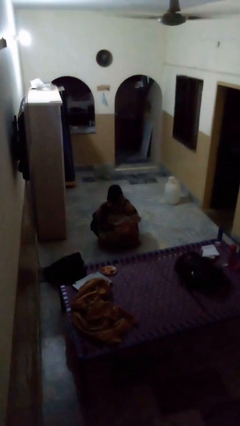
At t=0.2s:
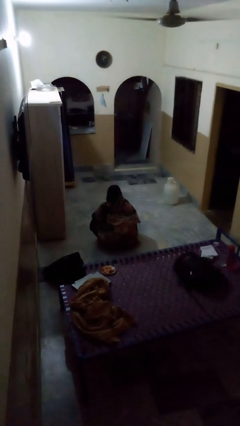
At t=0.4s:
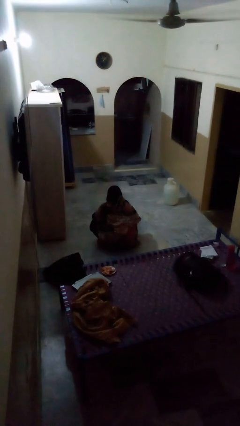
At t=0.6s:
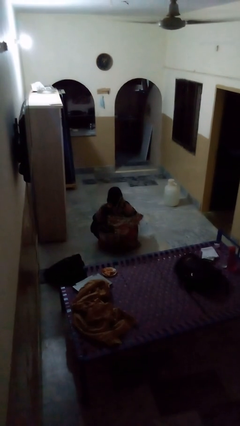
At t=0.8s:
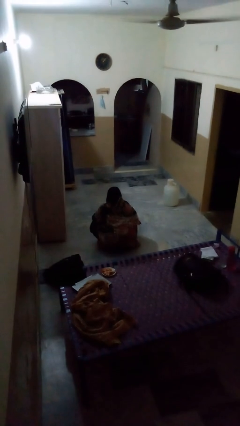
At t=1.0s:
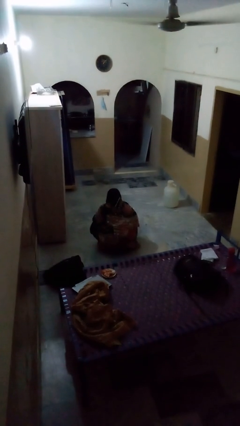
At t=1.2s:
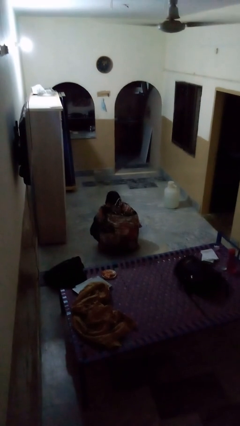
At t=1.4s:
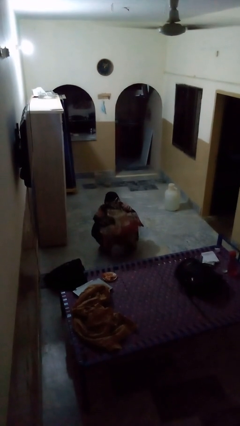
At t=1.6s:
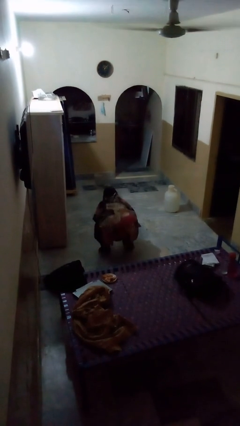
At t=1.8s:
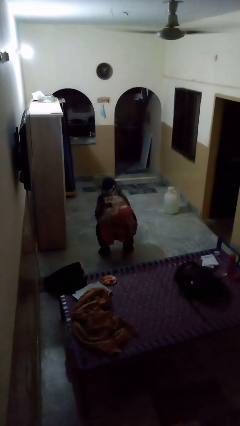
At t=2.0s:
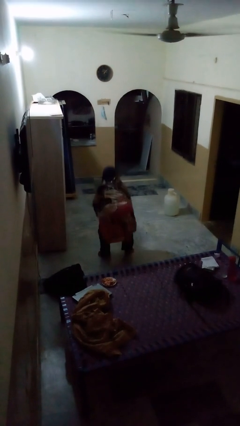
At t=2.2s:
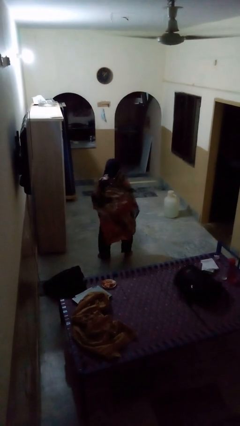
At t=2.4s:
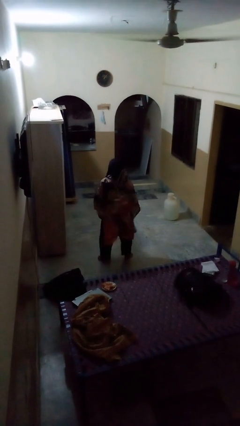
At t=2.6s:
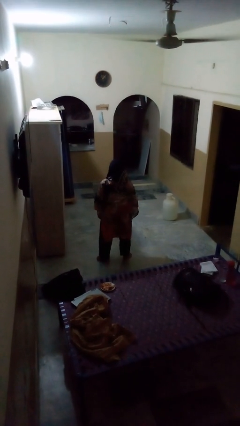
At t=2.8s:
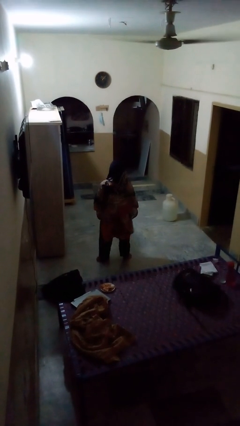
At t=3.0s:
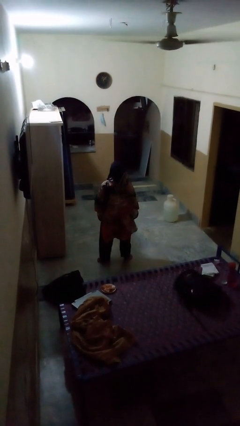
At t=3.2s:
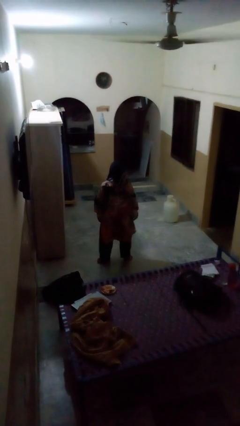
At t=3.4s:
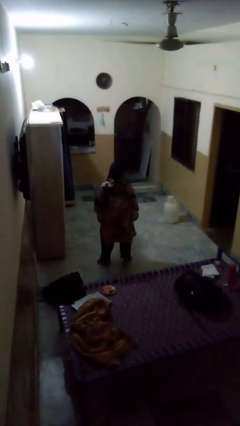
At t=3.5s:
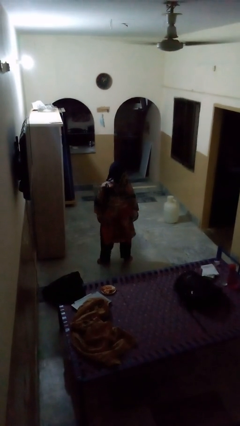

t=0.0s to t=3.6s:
person stands up

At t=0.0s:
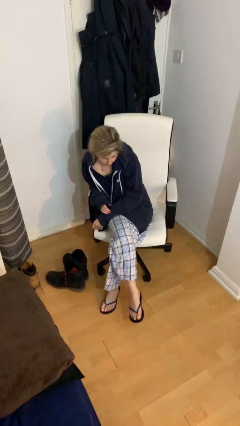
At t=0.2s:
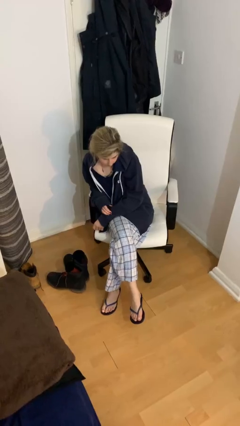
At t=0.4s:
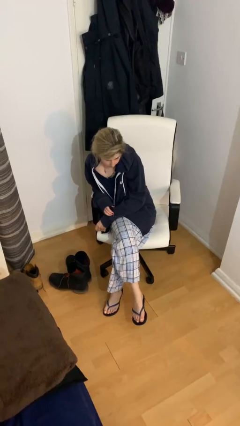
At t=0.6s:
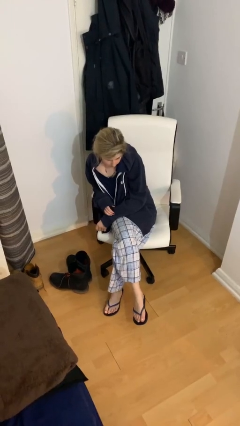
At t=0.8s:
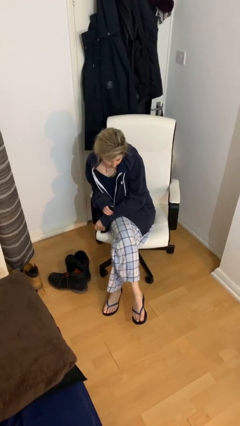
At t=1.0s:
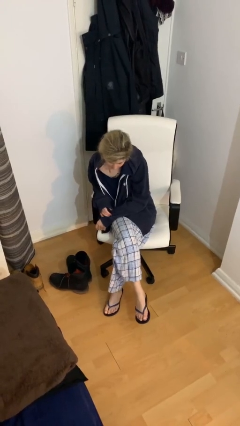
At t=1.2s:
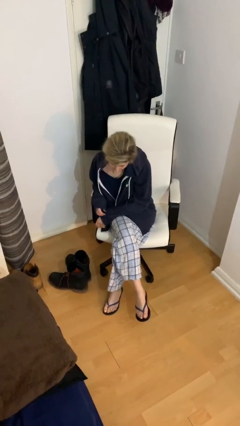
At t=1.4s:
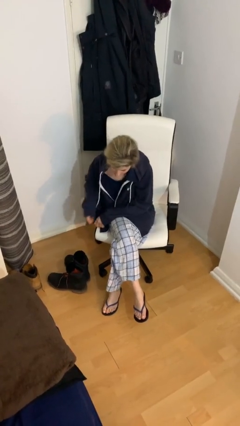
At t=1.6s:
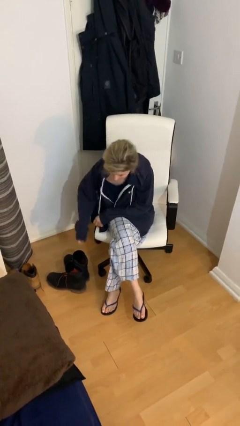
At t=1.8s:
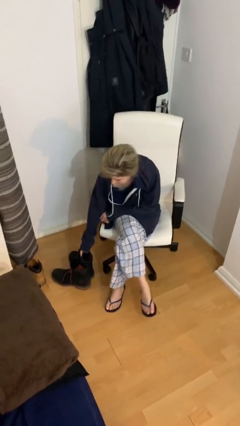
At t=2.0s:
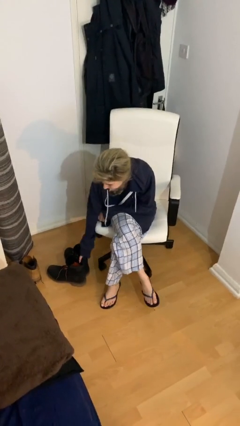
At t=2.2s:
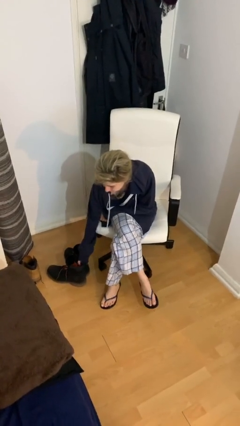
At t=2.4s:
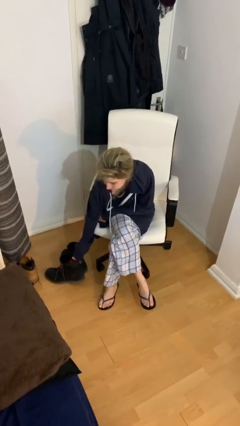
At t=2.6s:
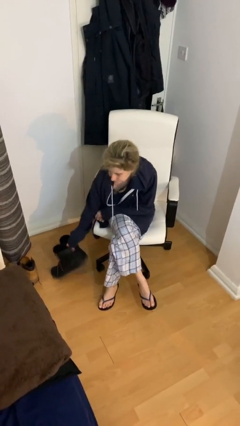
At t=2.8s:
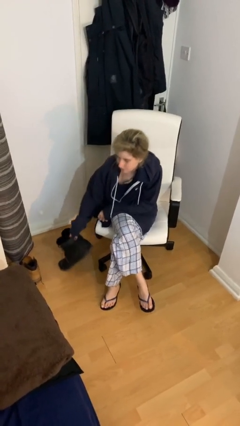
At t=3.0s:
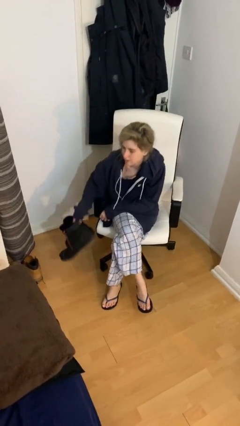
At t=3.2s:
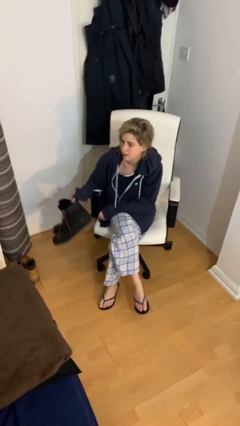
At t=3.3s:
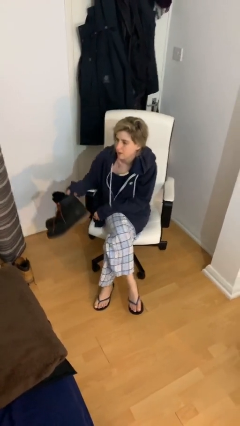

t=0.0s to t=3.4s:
person picks up object from floor

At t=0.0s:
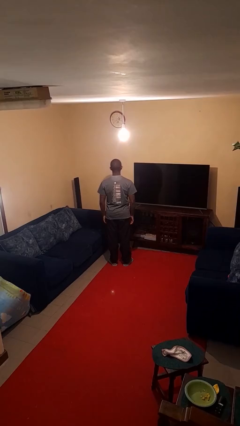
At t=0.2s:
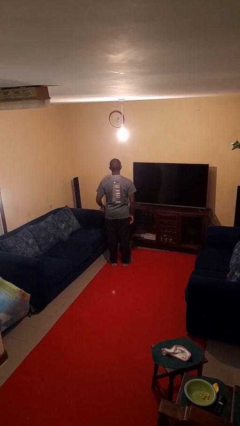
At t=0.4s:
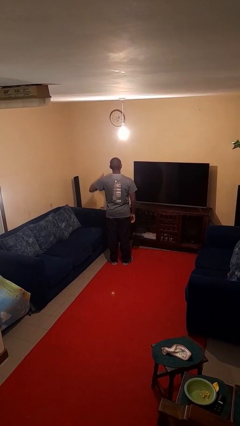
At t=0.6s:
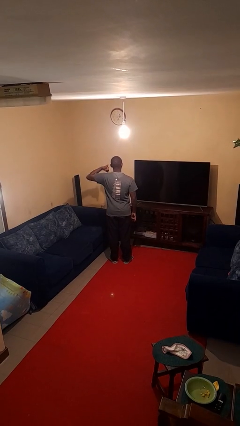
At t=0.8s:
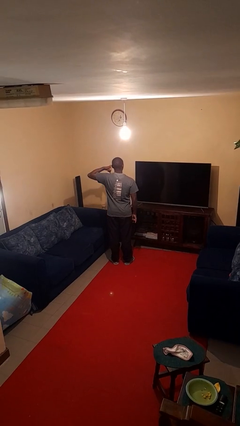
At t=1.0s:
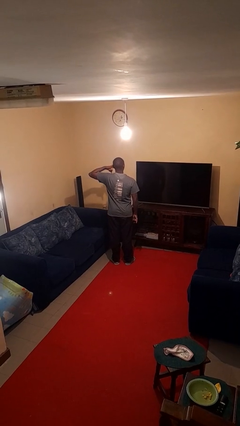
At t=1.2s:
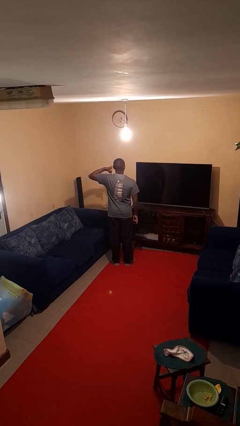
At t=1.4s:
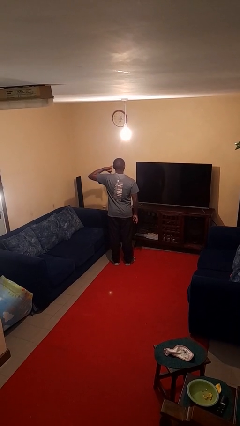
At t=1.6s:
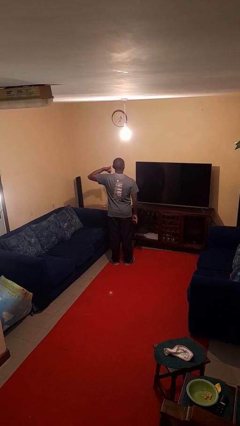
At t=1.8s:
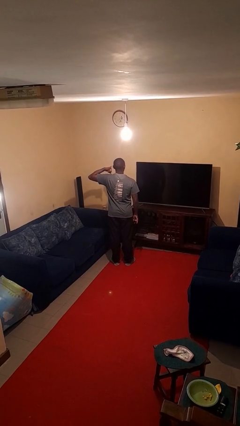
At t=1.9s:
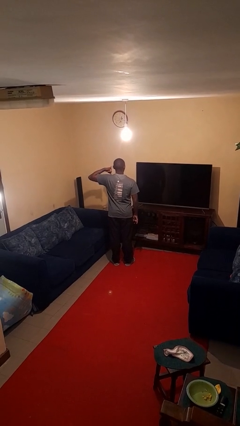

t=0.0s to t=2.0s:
person gestures call me

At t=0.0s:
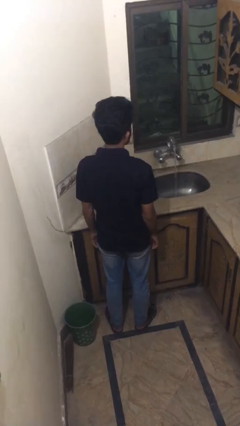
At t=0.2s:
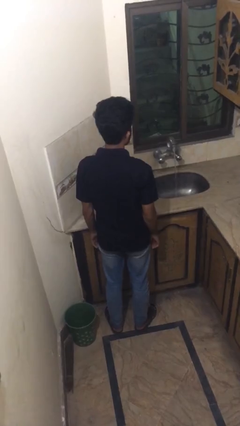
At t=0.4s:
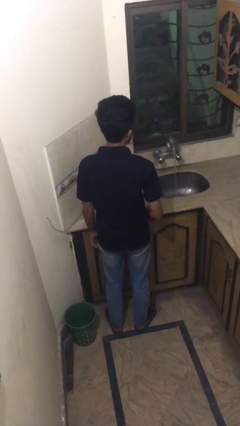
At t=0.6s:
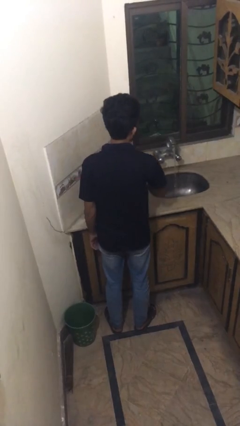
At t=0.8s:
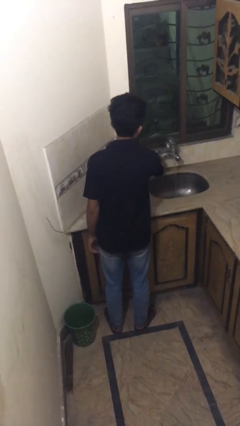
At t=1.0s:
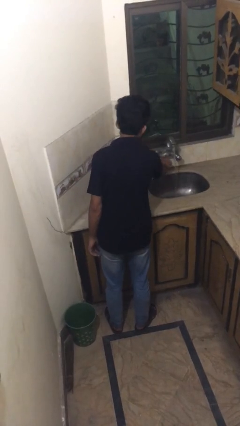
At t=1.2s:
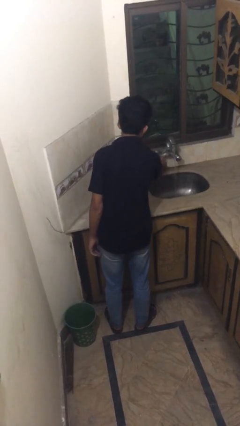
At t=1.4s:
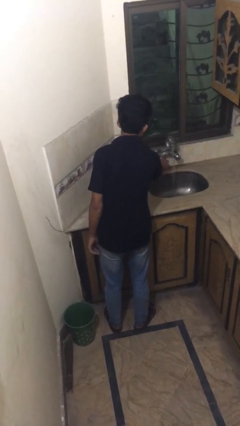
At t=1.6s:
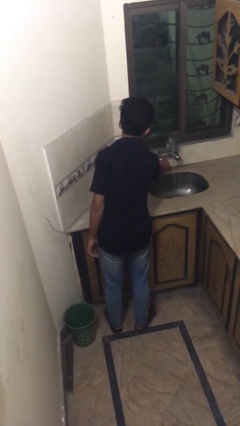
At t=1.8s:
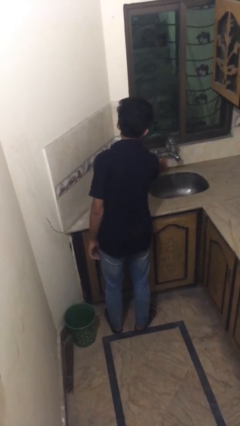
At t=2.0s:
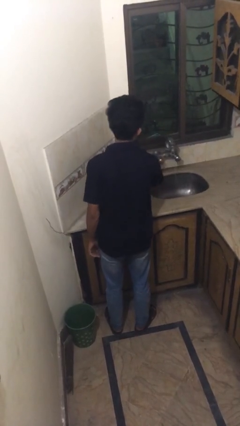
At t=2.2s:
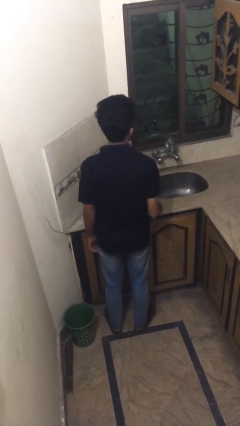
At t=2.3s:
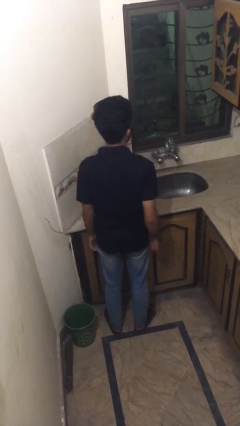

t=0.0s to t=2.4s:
person turns off faucet

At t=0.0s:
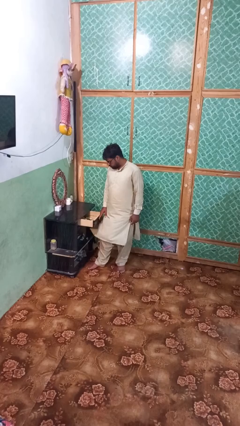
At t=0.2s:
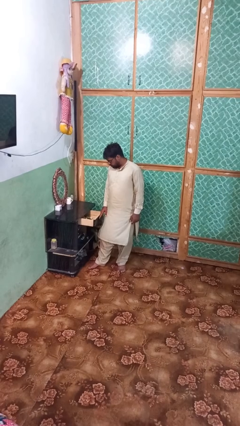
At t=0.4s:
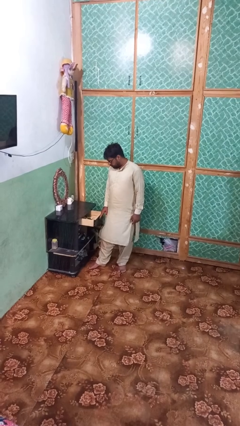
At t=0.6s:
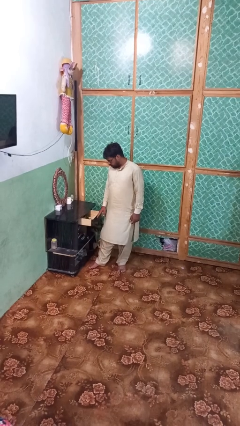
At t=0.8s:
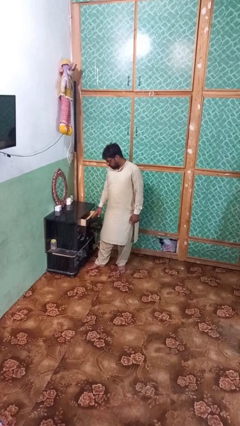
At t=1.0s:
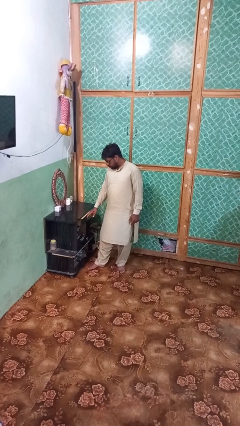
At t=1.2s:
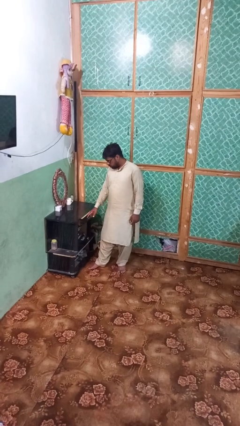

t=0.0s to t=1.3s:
person closes dresser drawer

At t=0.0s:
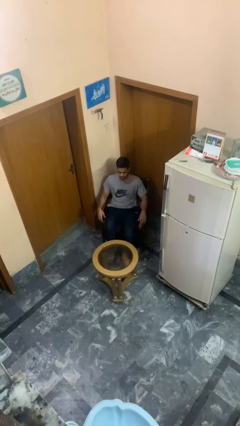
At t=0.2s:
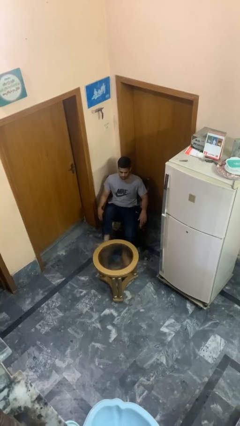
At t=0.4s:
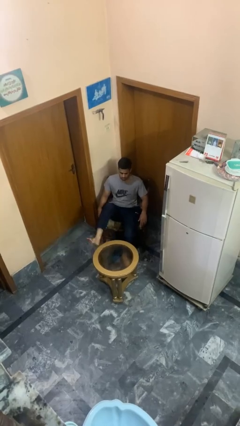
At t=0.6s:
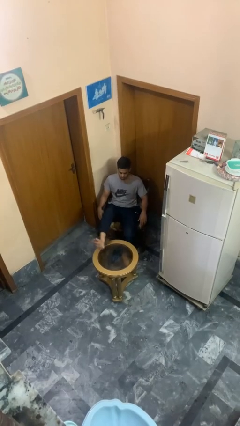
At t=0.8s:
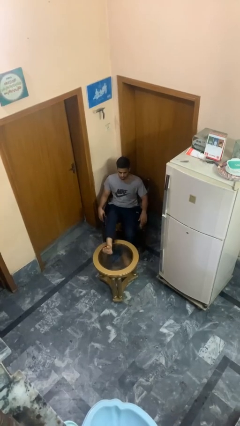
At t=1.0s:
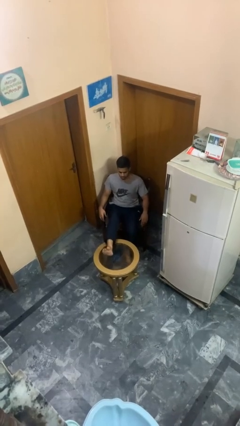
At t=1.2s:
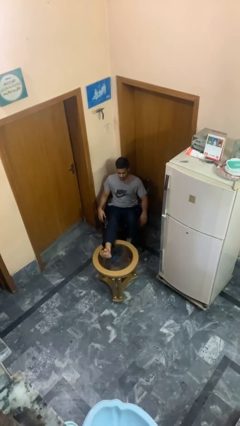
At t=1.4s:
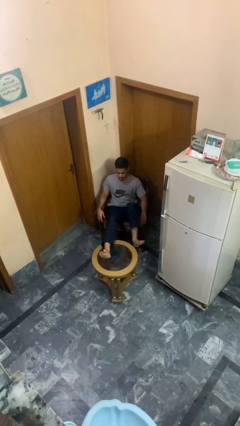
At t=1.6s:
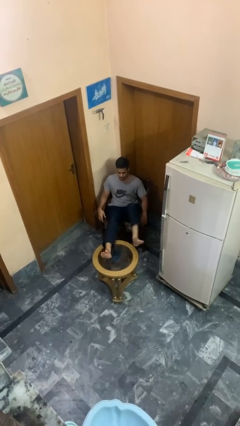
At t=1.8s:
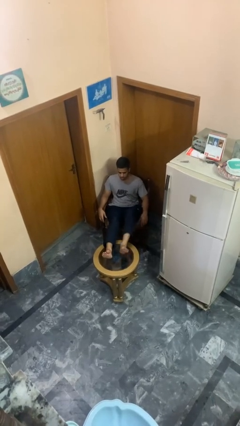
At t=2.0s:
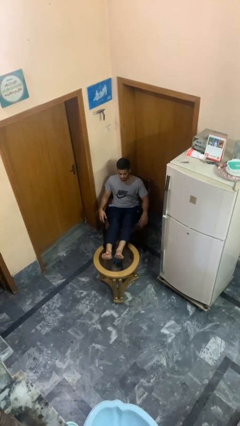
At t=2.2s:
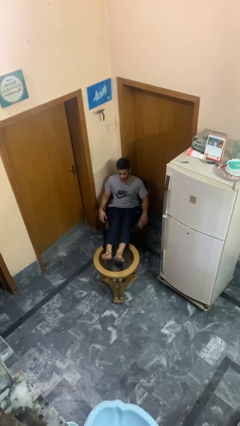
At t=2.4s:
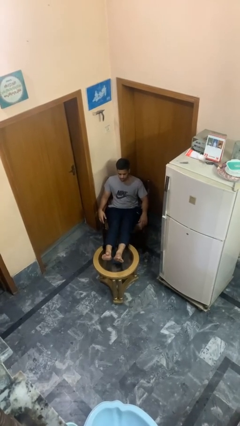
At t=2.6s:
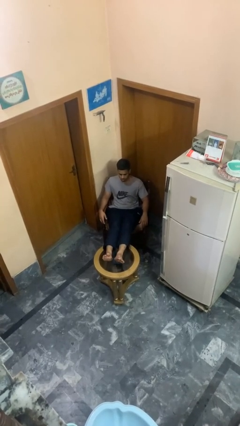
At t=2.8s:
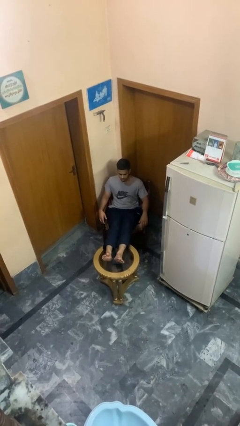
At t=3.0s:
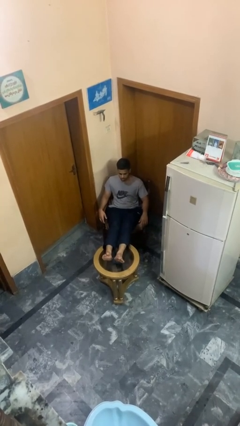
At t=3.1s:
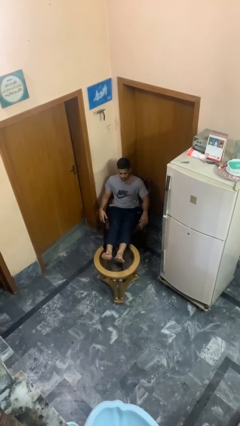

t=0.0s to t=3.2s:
person puts feet up

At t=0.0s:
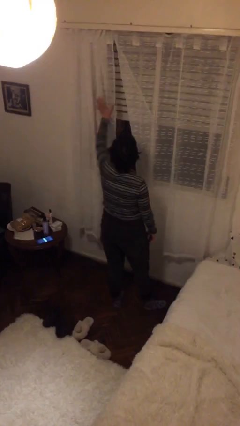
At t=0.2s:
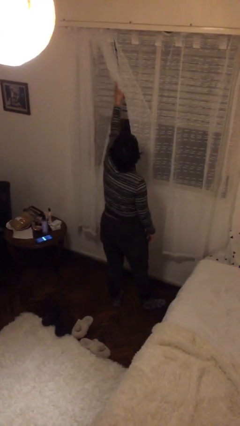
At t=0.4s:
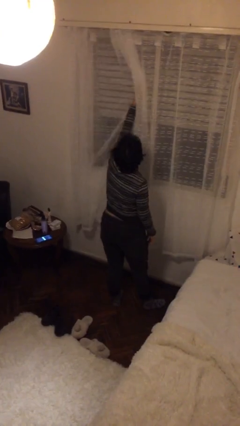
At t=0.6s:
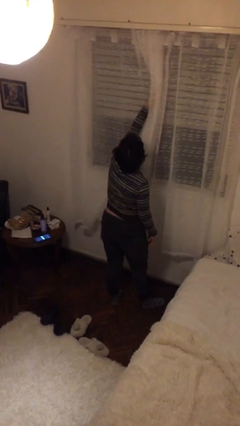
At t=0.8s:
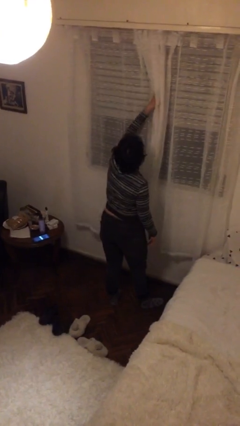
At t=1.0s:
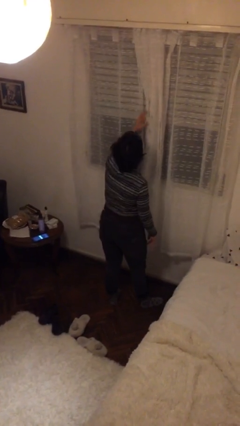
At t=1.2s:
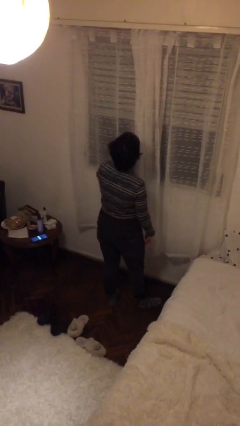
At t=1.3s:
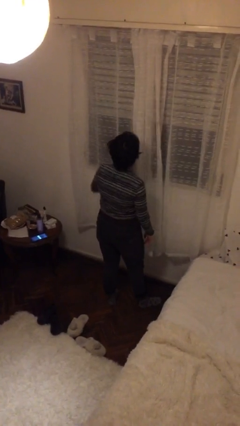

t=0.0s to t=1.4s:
person closes curtains
